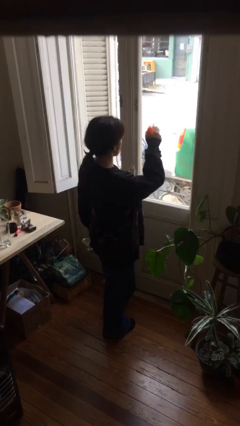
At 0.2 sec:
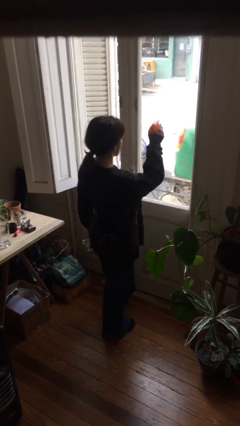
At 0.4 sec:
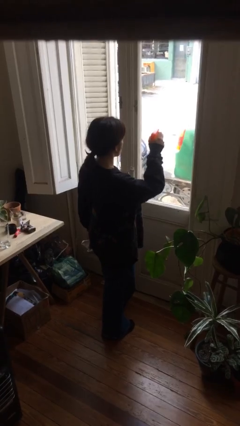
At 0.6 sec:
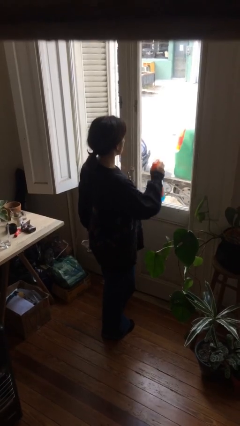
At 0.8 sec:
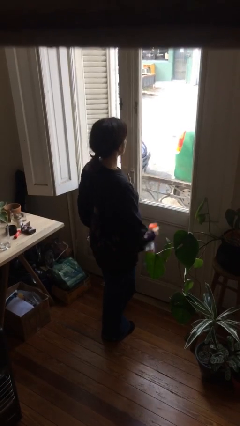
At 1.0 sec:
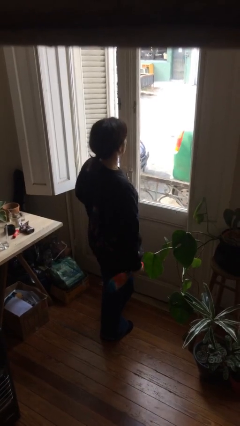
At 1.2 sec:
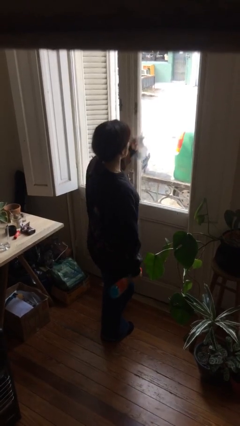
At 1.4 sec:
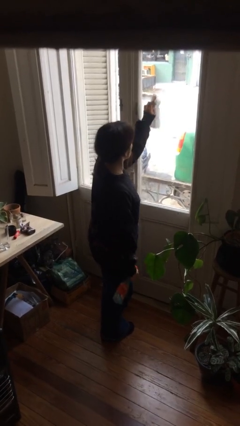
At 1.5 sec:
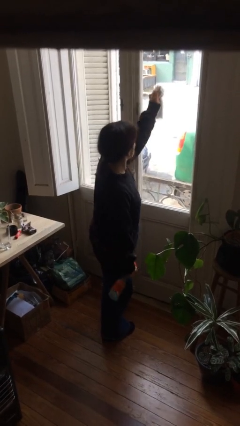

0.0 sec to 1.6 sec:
person sprays from bottle

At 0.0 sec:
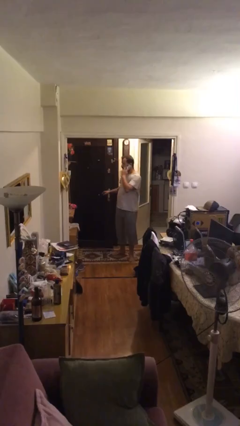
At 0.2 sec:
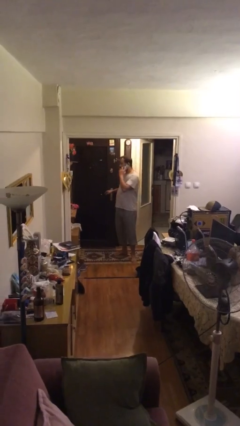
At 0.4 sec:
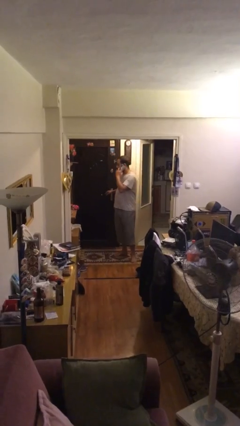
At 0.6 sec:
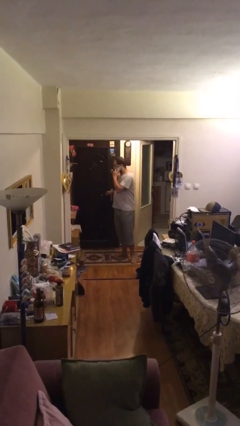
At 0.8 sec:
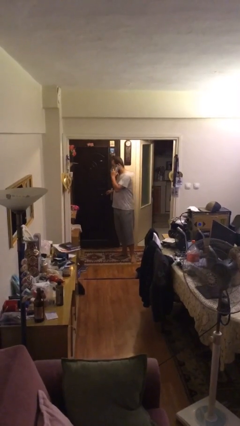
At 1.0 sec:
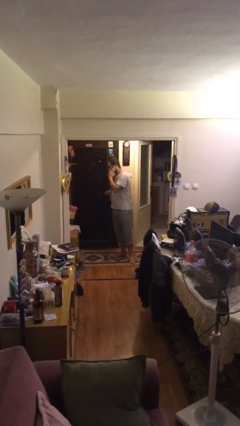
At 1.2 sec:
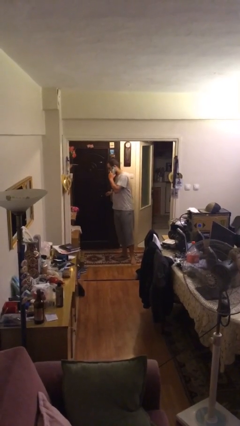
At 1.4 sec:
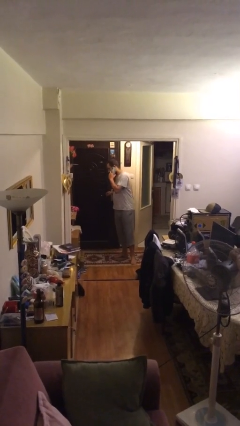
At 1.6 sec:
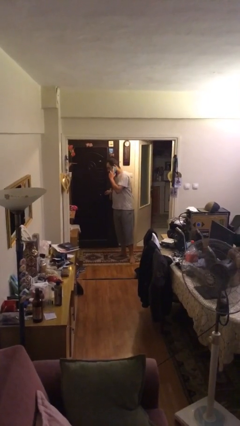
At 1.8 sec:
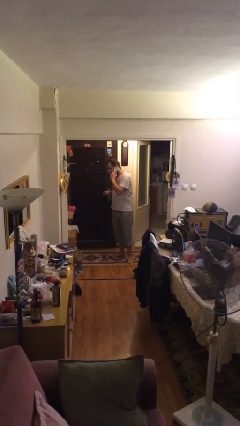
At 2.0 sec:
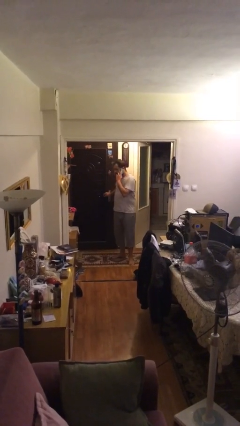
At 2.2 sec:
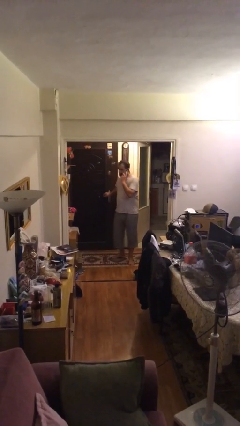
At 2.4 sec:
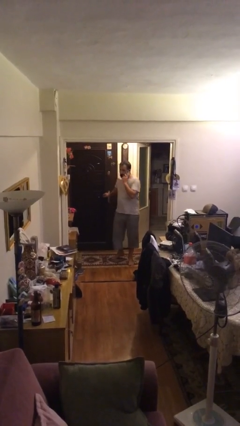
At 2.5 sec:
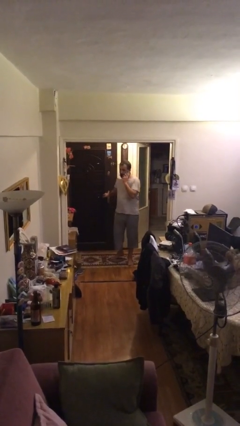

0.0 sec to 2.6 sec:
person closes facility door

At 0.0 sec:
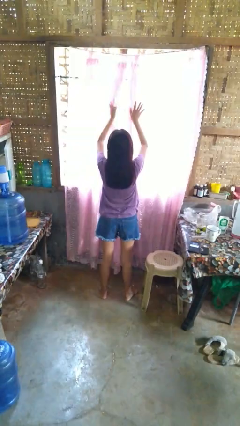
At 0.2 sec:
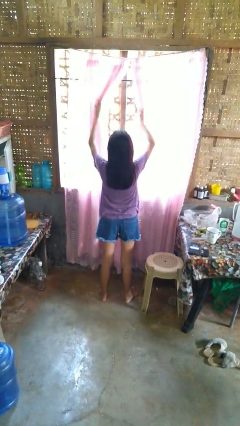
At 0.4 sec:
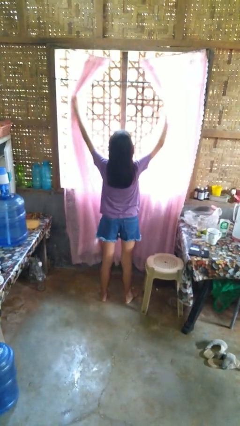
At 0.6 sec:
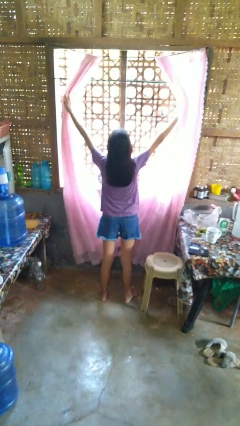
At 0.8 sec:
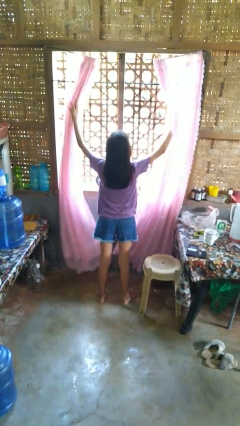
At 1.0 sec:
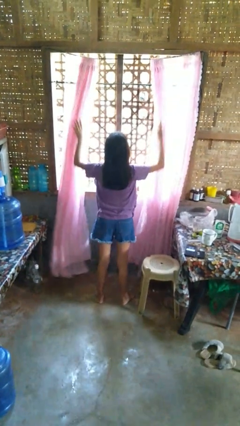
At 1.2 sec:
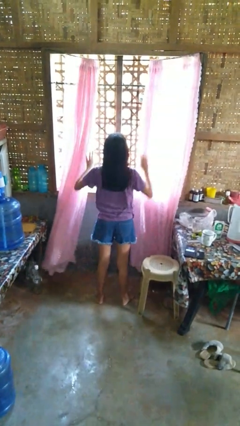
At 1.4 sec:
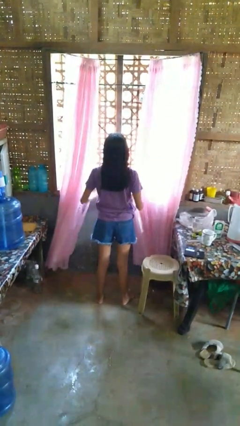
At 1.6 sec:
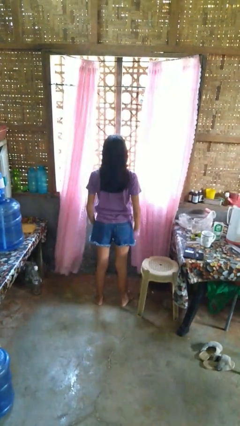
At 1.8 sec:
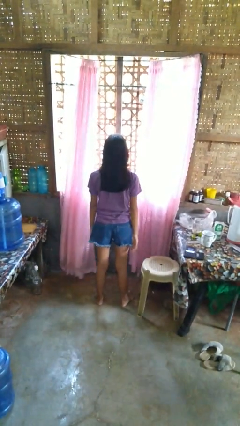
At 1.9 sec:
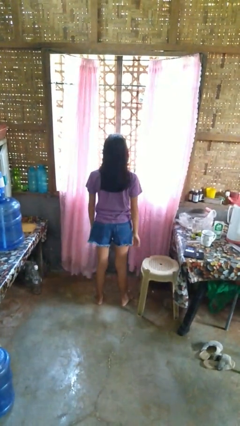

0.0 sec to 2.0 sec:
person opens curtains

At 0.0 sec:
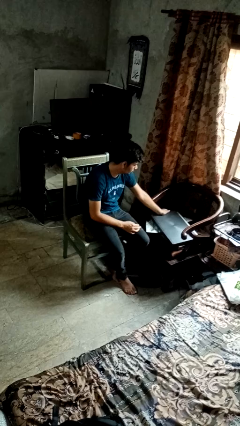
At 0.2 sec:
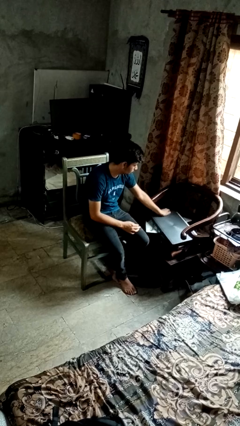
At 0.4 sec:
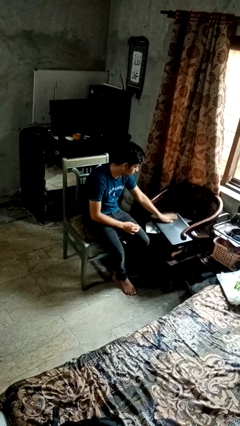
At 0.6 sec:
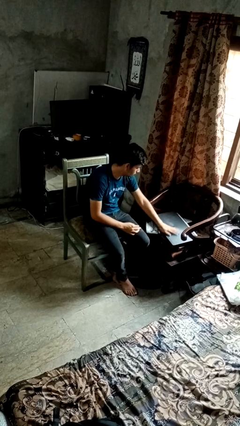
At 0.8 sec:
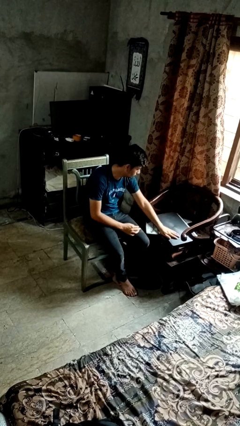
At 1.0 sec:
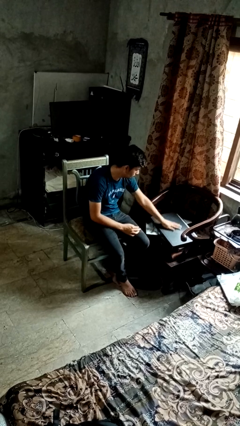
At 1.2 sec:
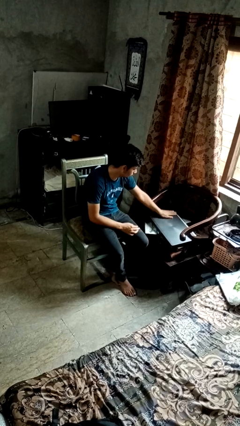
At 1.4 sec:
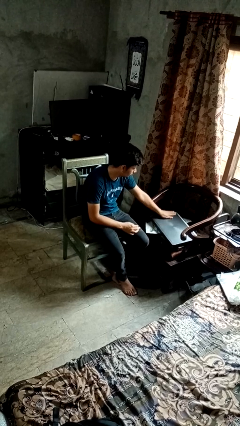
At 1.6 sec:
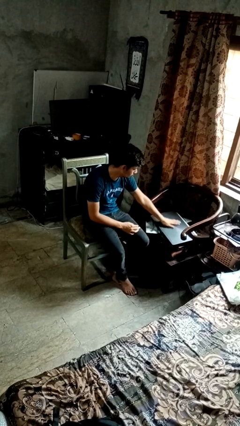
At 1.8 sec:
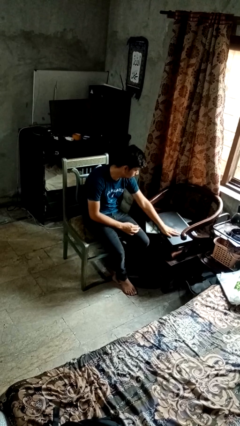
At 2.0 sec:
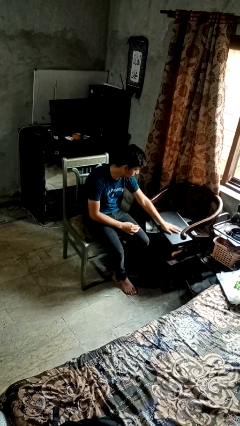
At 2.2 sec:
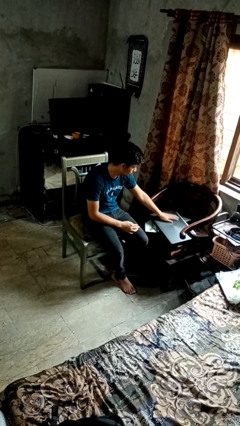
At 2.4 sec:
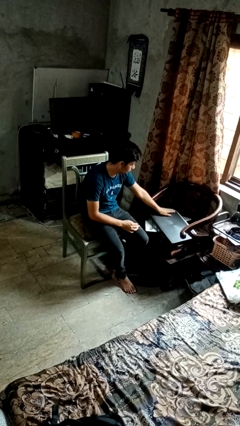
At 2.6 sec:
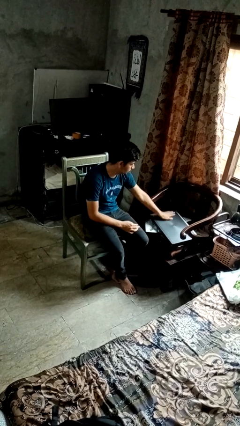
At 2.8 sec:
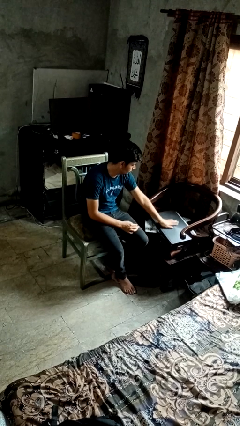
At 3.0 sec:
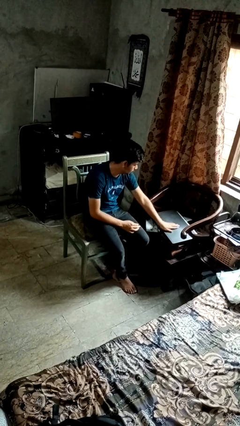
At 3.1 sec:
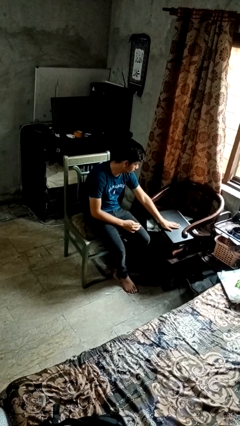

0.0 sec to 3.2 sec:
person waves hand over object

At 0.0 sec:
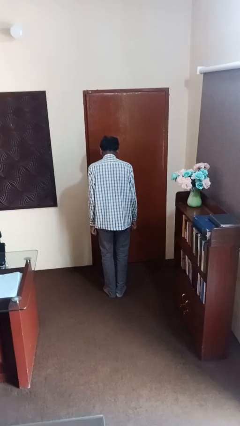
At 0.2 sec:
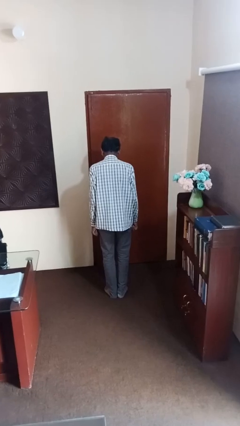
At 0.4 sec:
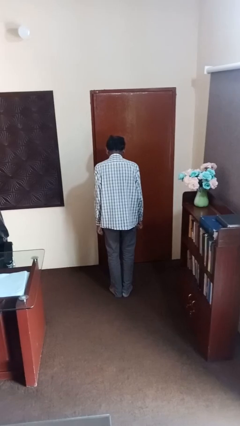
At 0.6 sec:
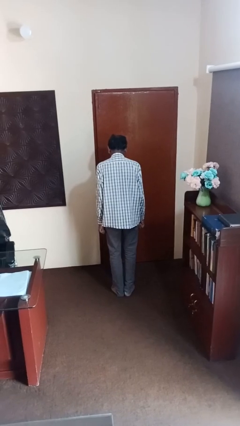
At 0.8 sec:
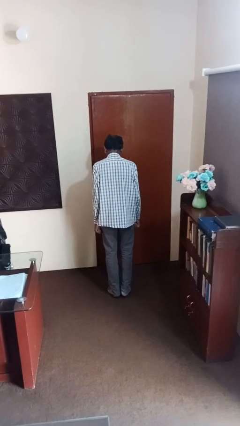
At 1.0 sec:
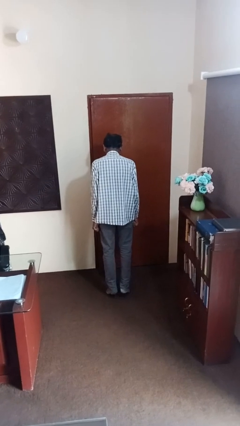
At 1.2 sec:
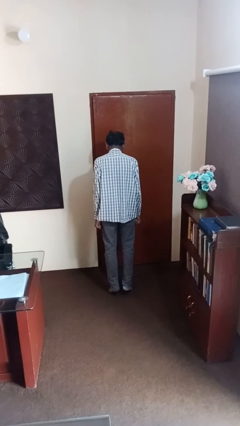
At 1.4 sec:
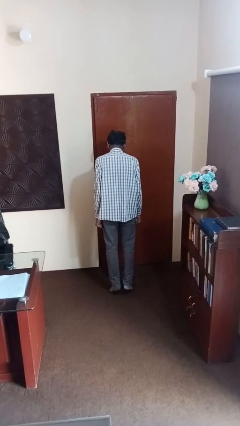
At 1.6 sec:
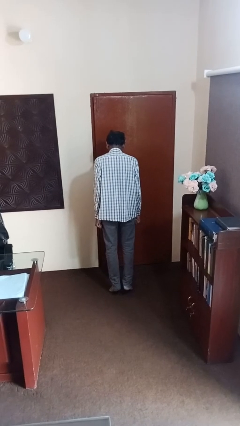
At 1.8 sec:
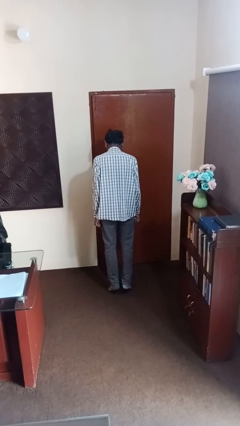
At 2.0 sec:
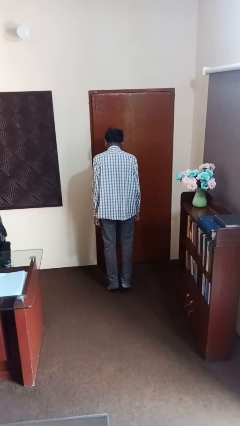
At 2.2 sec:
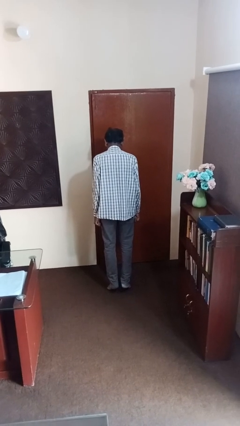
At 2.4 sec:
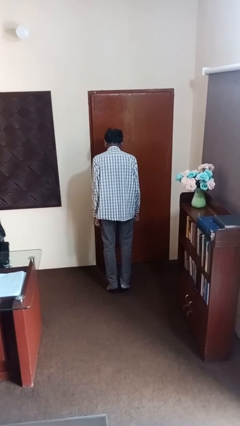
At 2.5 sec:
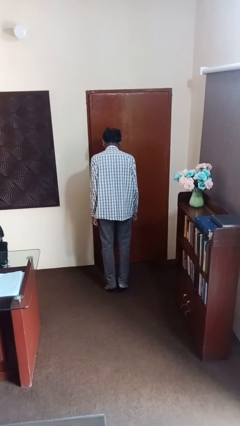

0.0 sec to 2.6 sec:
person walks tiptoe

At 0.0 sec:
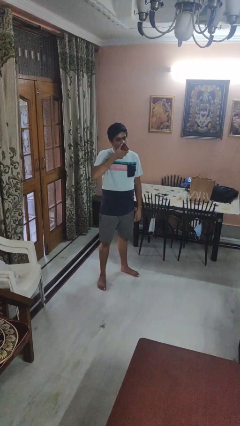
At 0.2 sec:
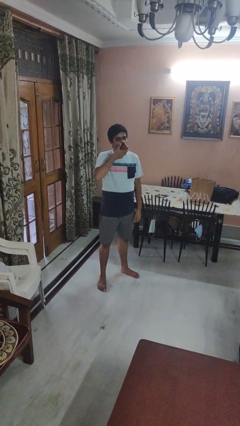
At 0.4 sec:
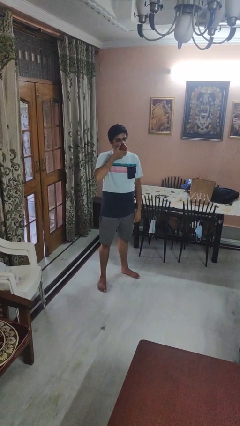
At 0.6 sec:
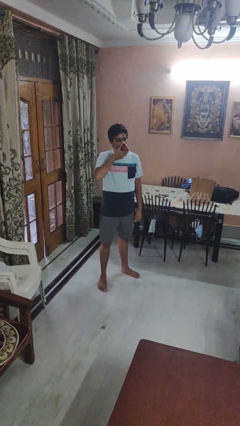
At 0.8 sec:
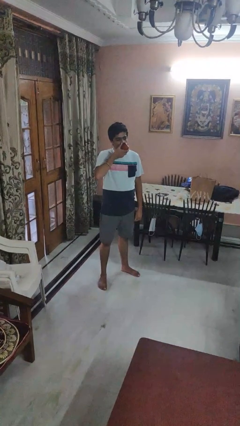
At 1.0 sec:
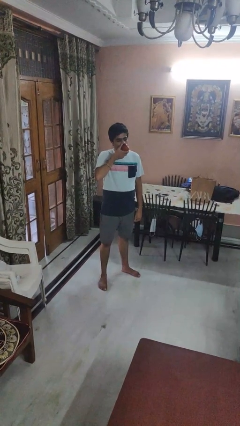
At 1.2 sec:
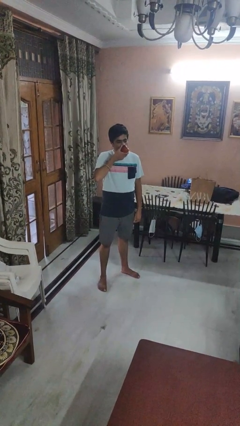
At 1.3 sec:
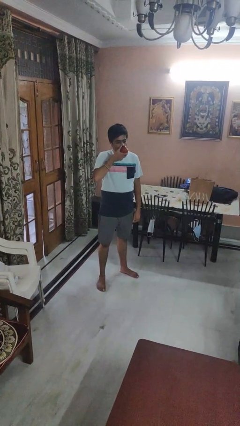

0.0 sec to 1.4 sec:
person eats apple

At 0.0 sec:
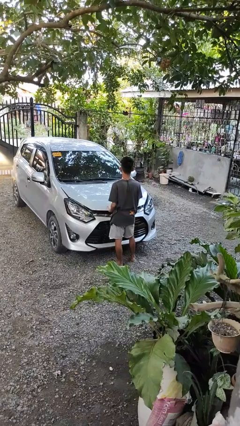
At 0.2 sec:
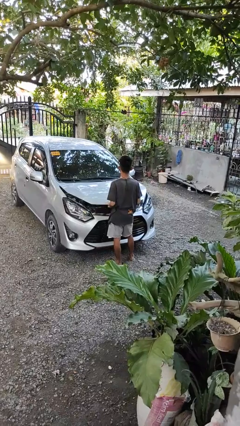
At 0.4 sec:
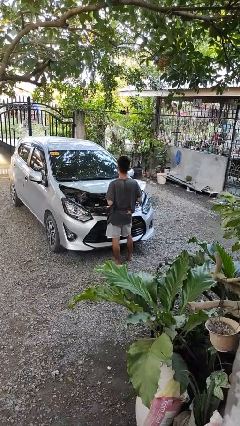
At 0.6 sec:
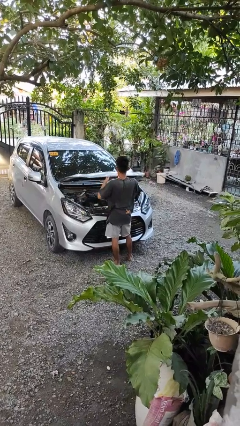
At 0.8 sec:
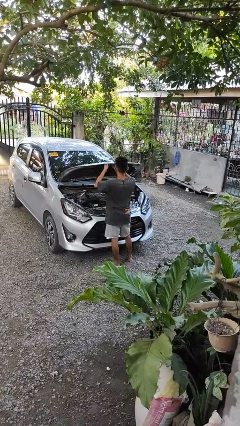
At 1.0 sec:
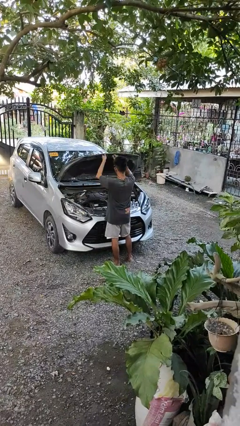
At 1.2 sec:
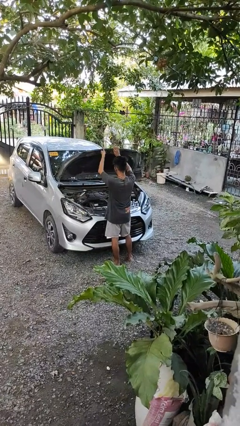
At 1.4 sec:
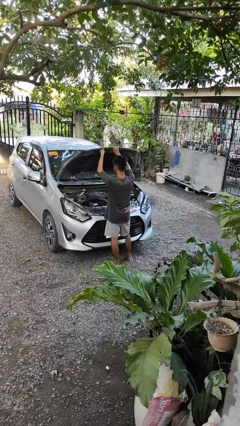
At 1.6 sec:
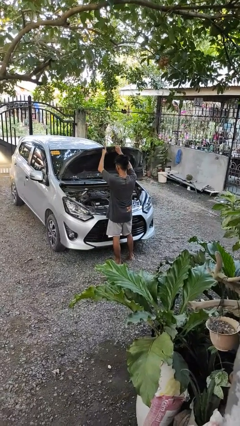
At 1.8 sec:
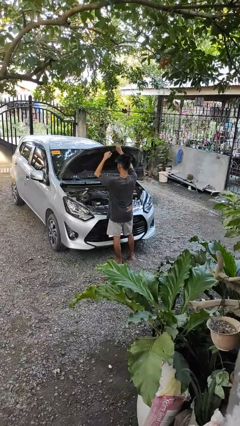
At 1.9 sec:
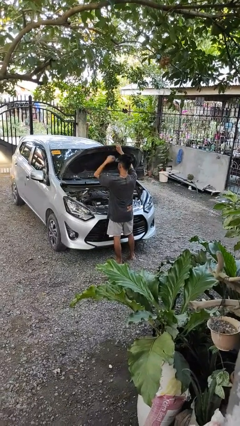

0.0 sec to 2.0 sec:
person opens car hood

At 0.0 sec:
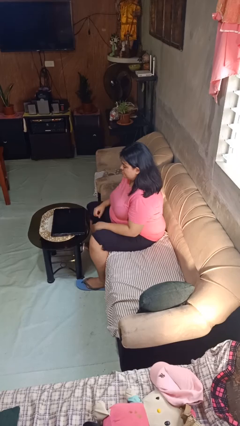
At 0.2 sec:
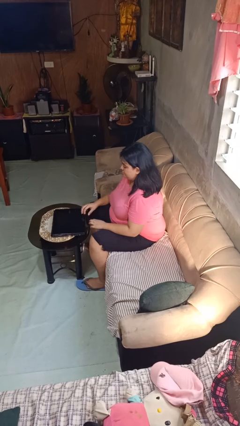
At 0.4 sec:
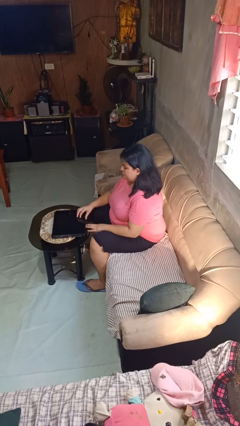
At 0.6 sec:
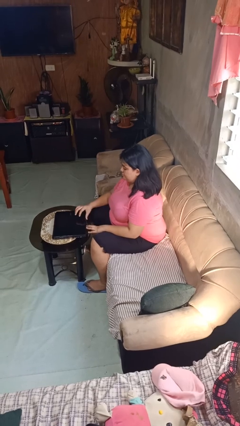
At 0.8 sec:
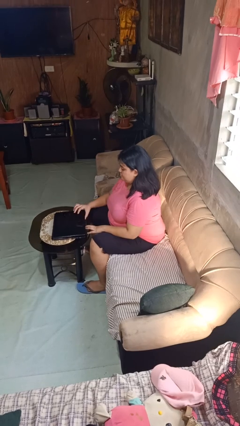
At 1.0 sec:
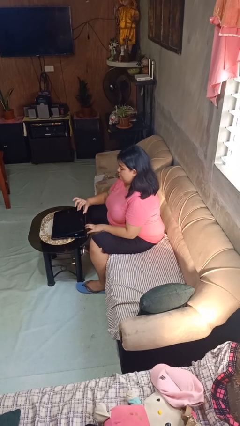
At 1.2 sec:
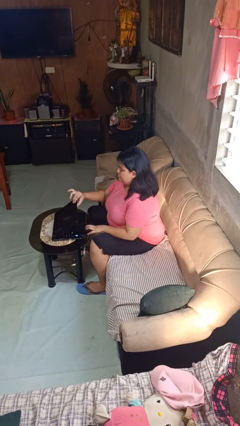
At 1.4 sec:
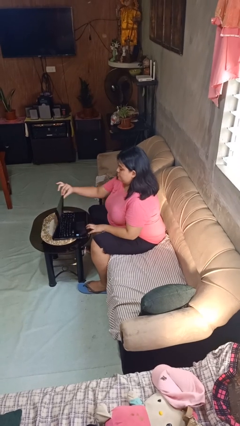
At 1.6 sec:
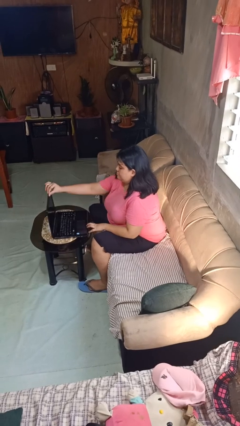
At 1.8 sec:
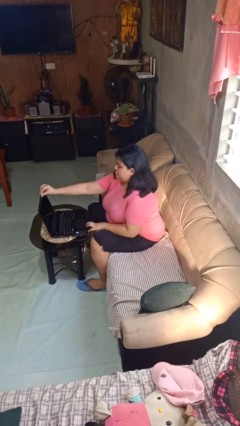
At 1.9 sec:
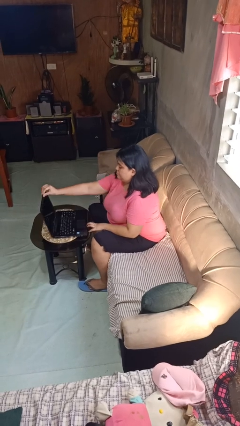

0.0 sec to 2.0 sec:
person opens laptop
